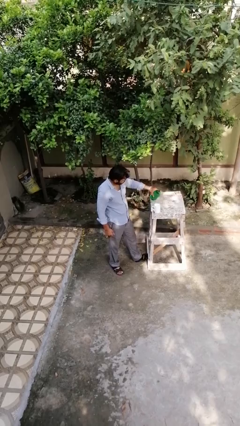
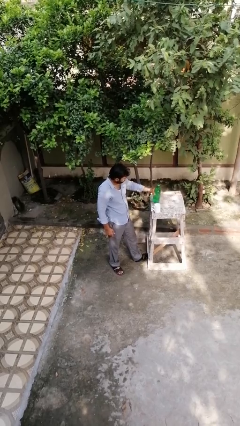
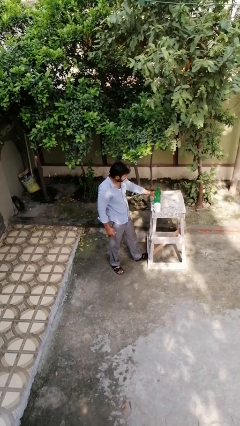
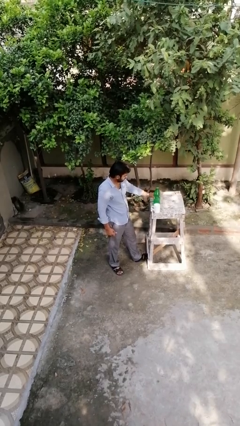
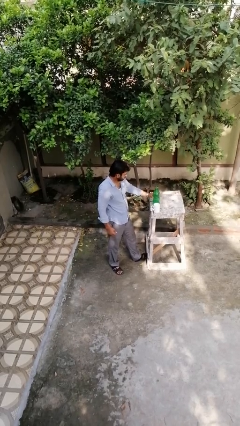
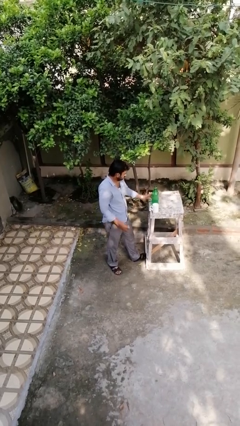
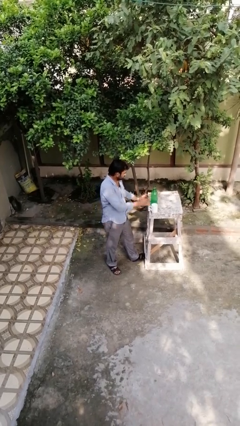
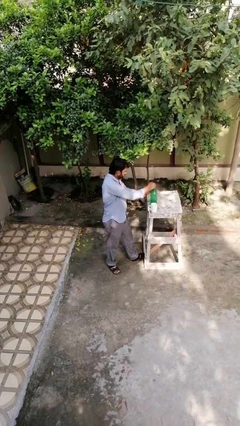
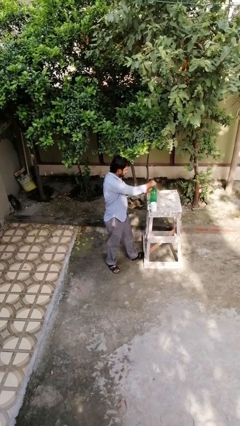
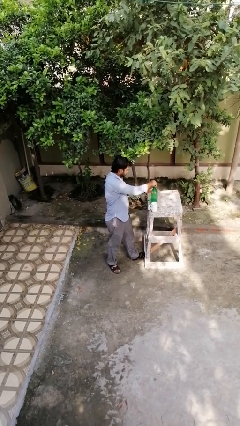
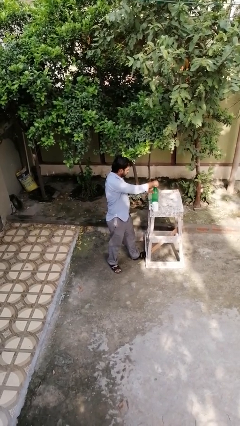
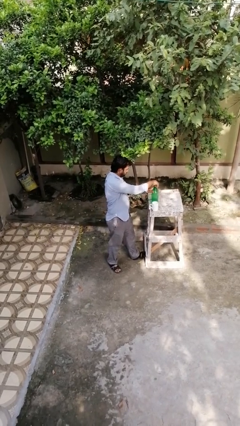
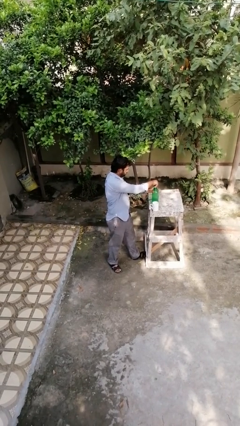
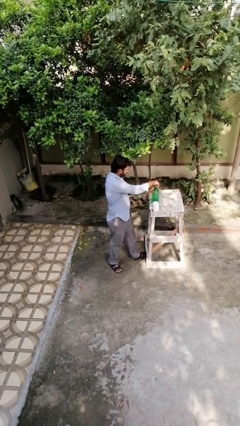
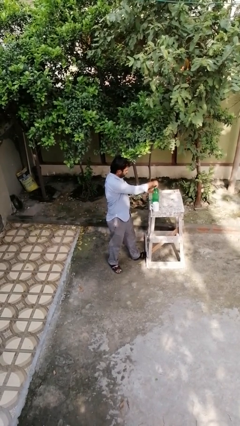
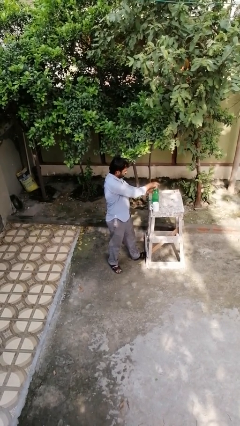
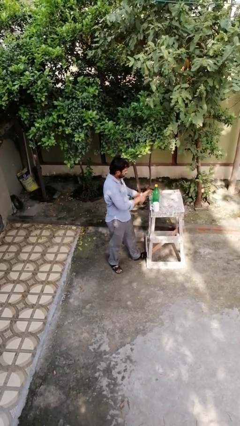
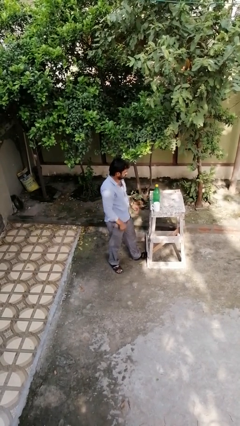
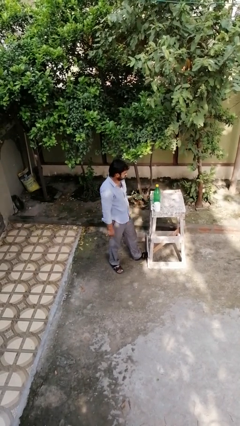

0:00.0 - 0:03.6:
person screws lid to bottle

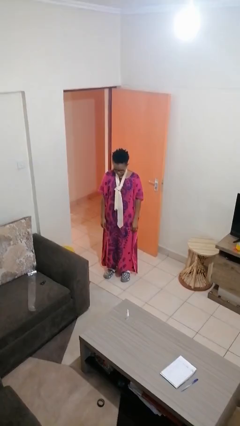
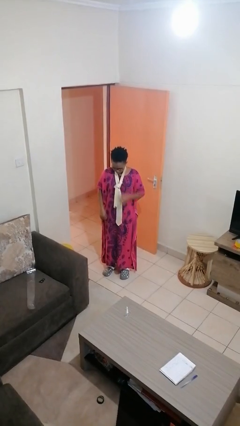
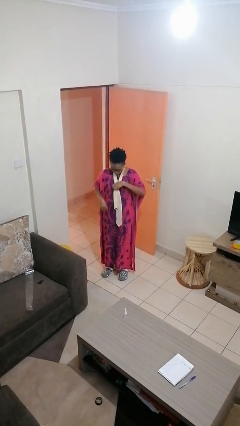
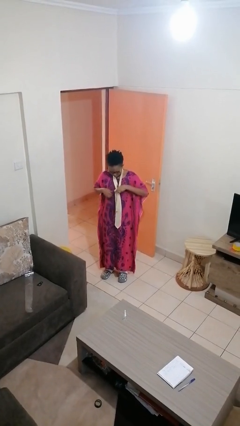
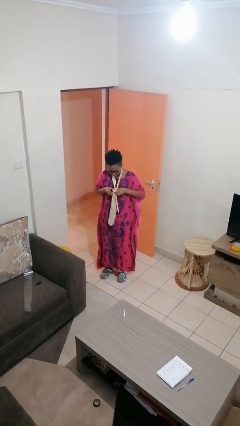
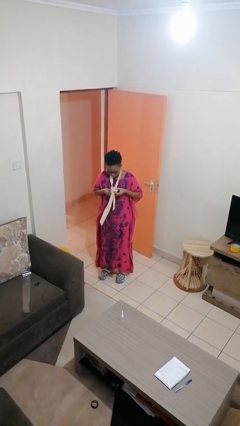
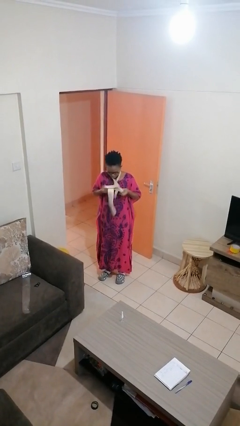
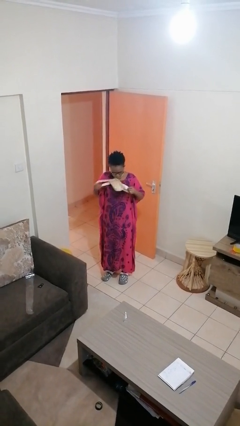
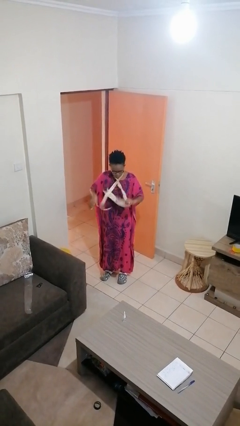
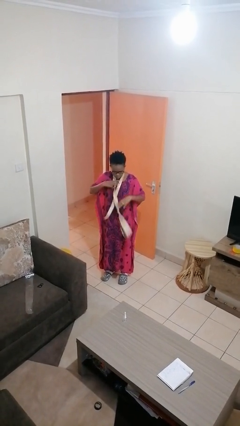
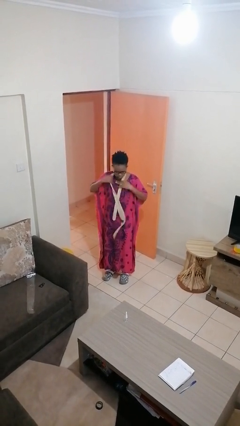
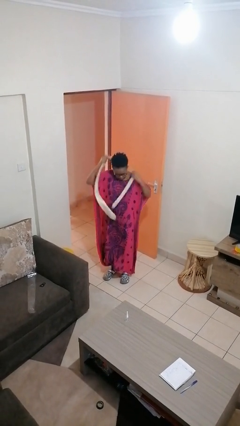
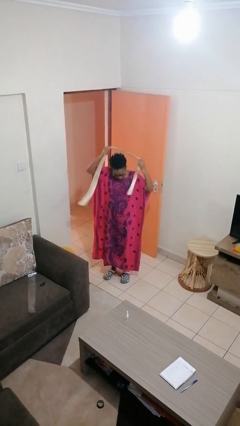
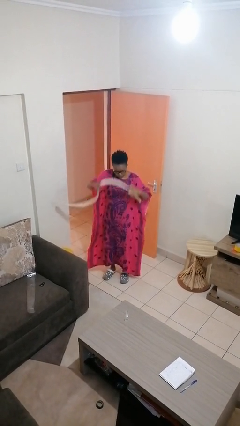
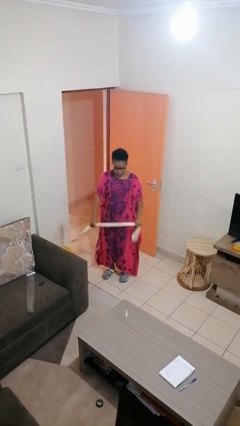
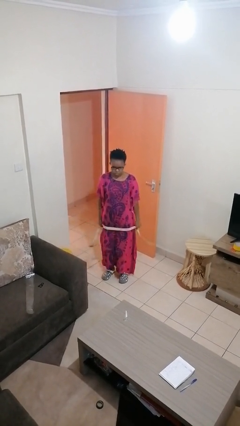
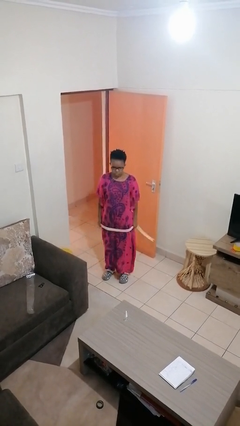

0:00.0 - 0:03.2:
person takes off necktie

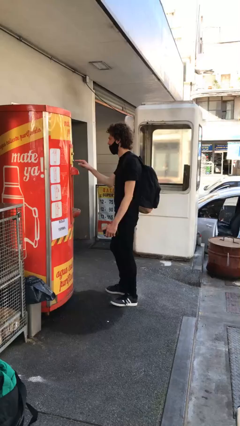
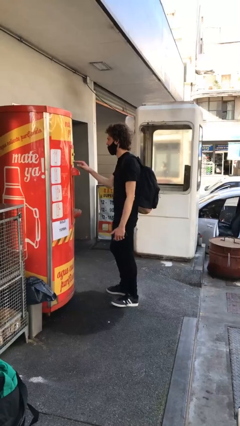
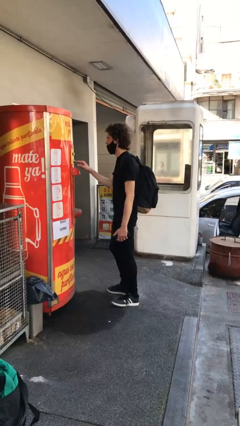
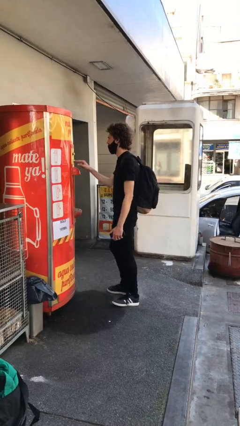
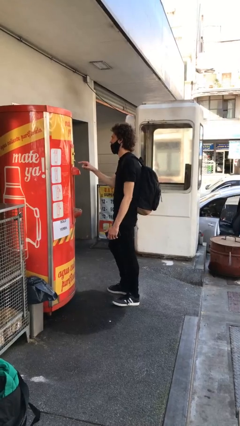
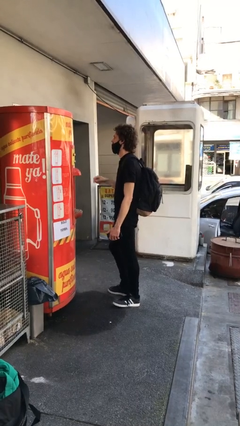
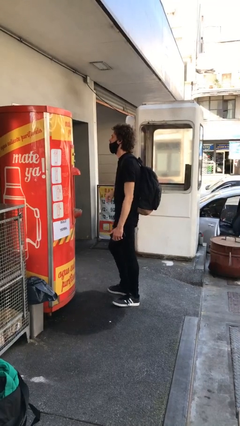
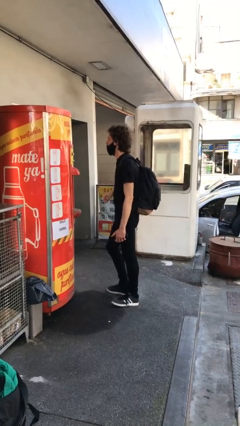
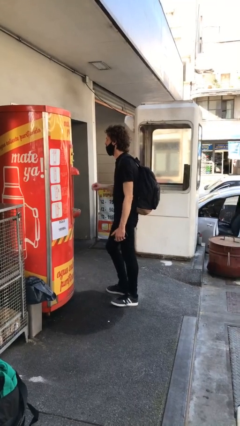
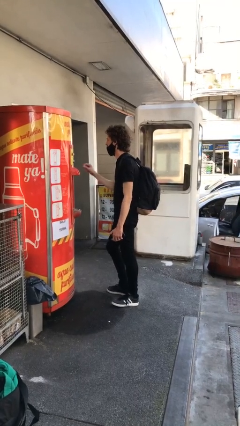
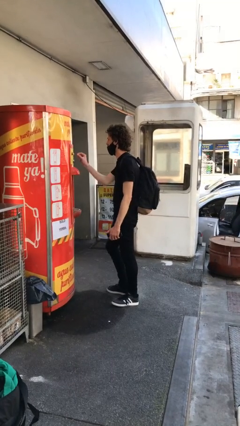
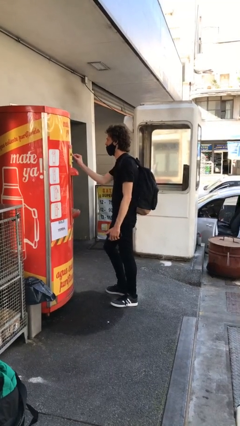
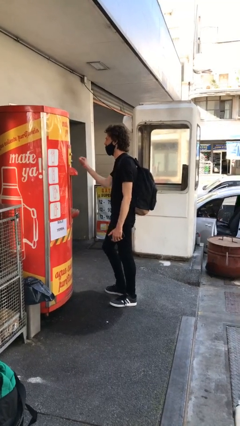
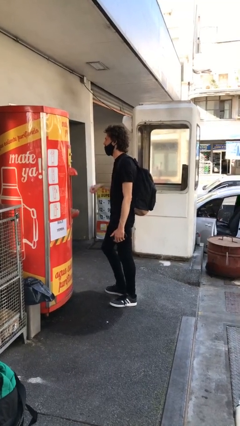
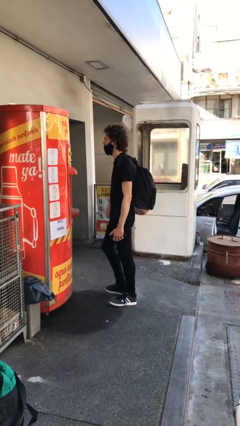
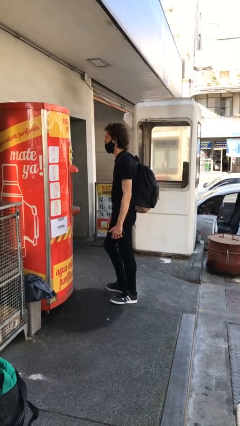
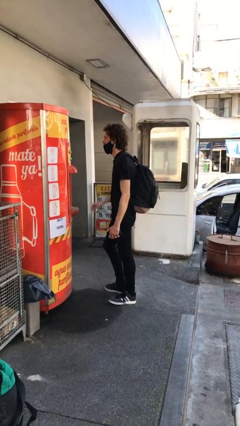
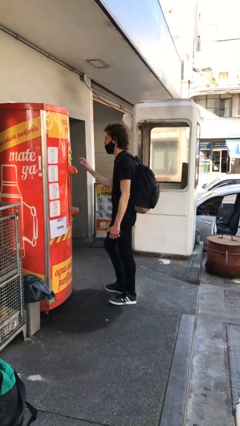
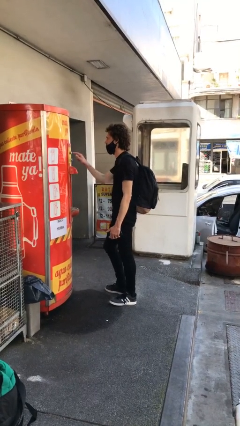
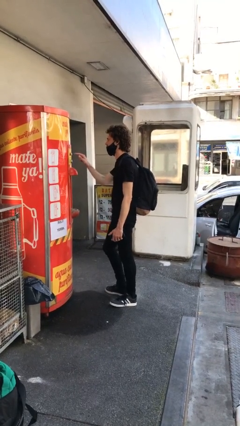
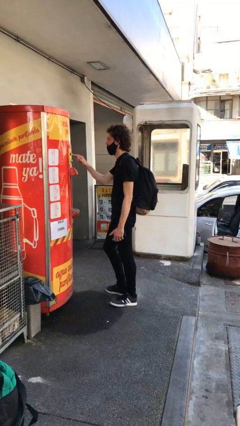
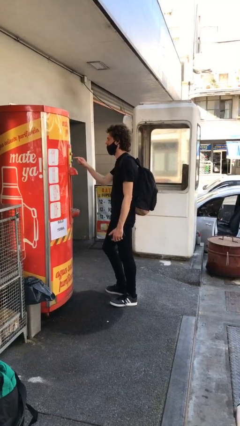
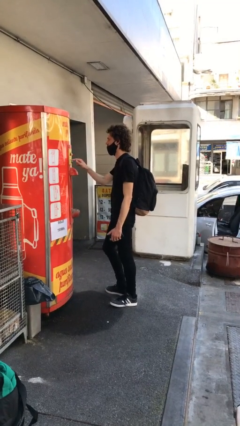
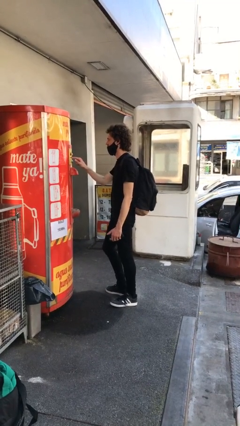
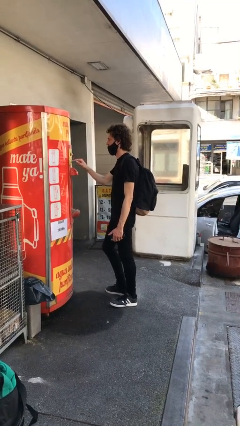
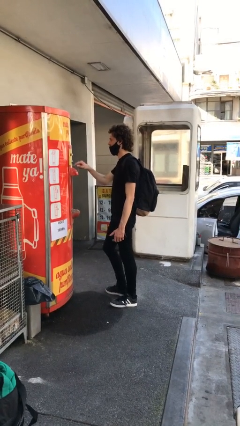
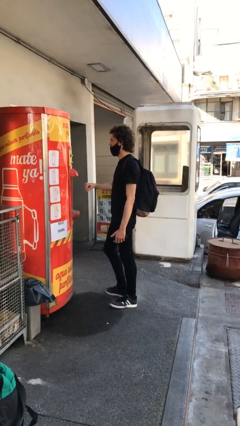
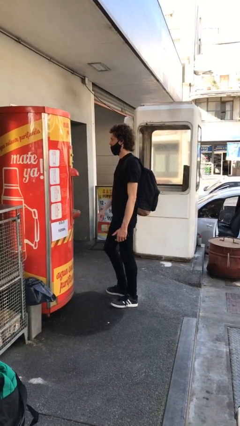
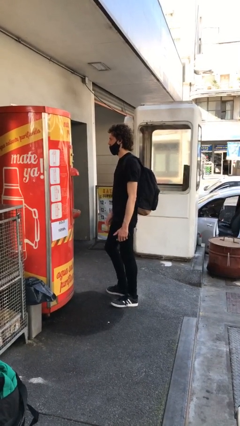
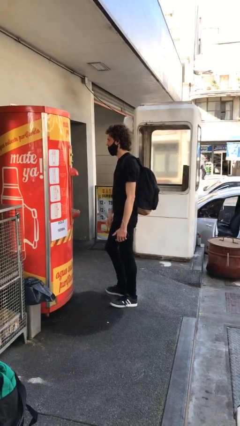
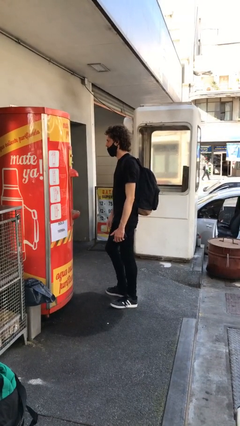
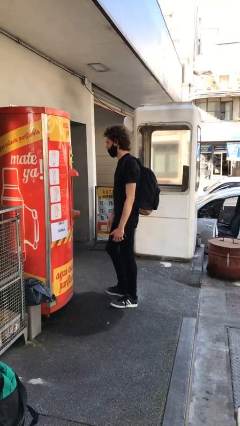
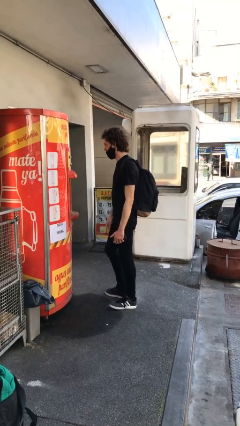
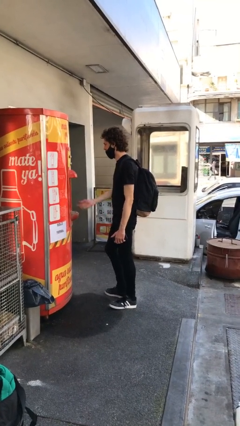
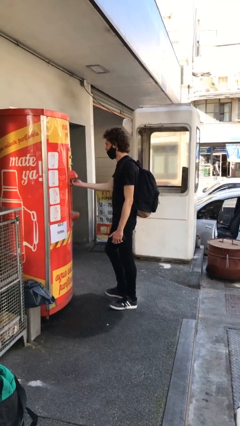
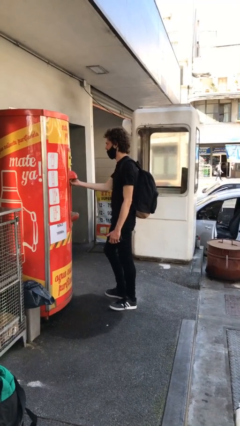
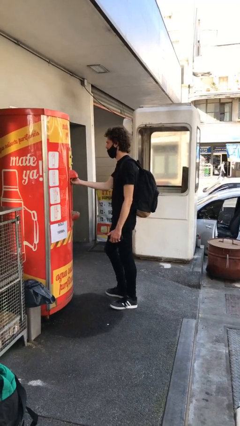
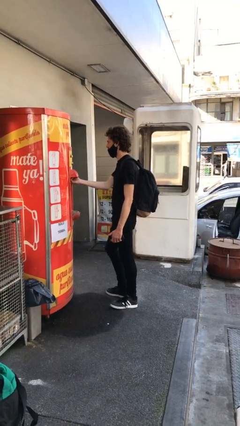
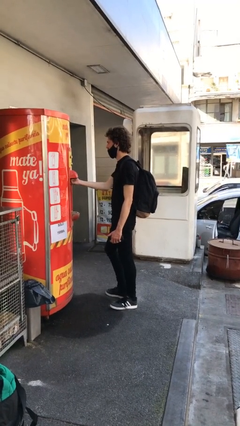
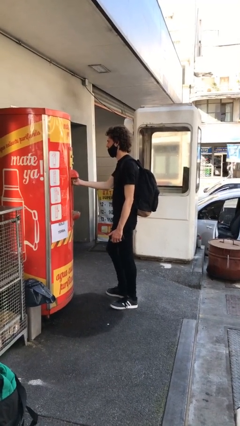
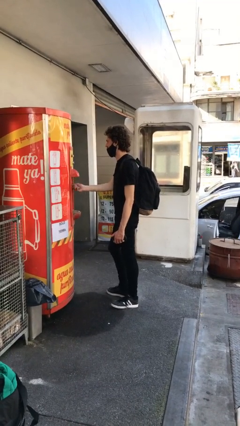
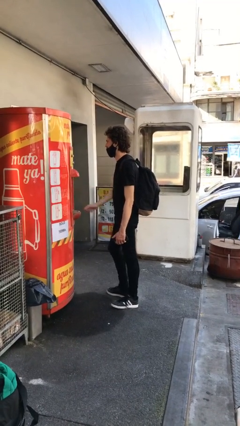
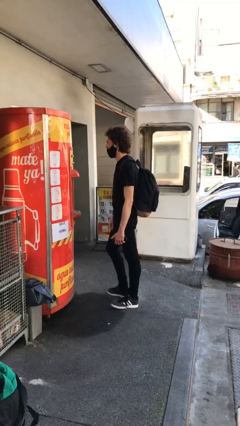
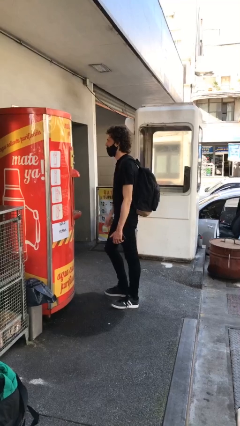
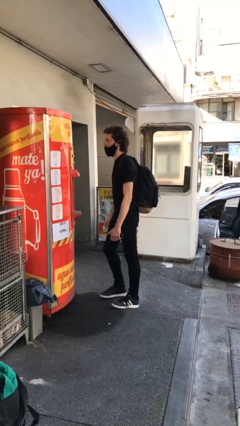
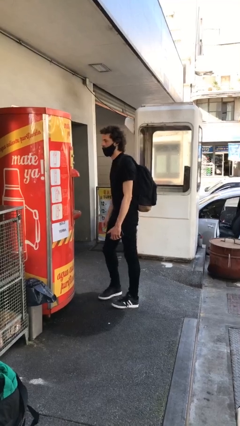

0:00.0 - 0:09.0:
person purchases from machine

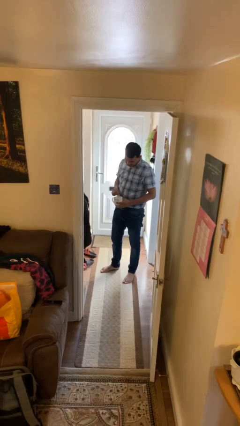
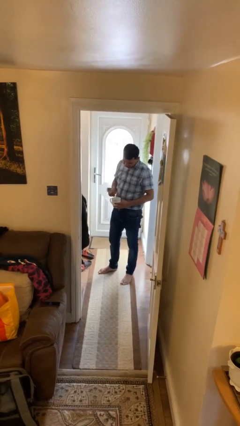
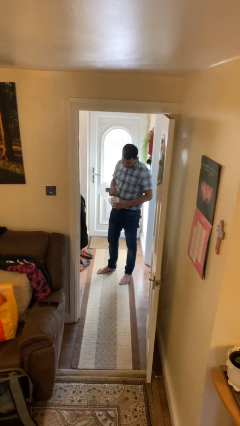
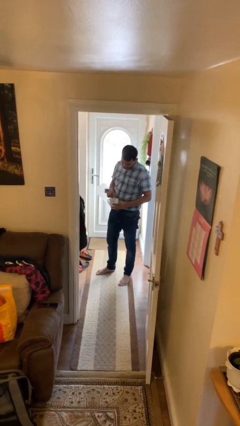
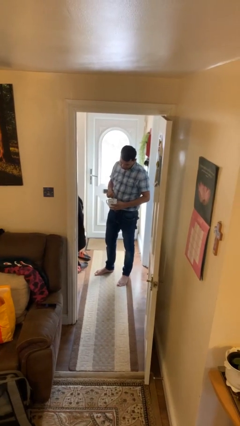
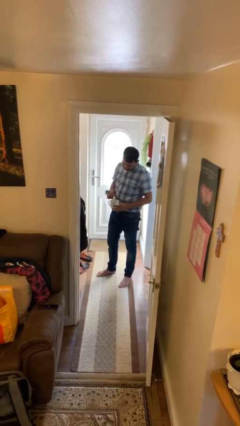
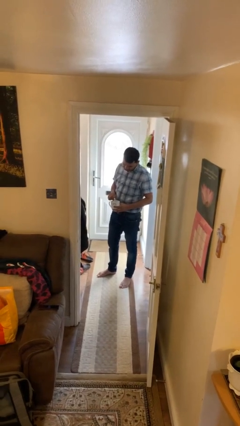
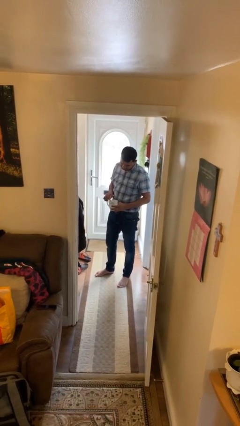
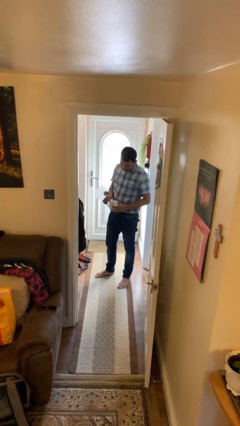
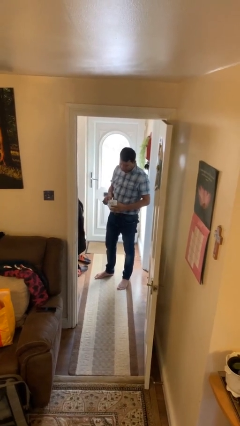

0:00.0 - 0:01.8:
person stirs mug
